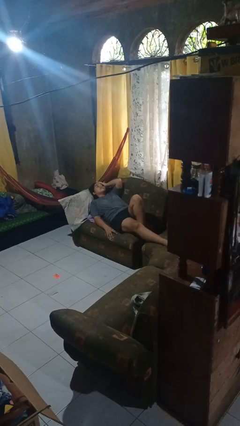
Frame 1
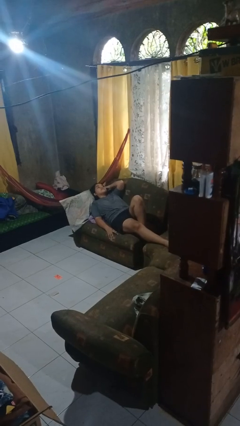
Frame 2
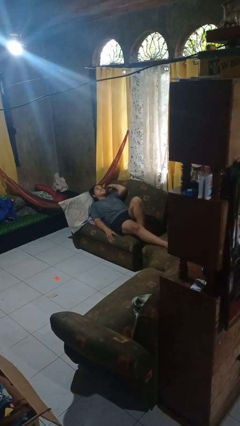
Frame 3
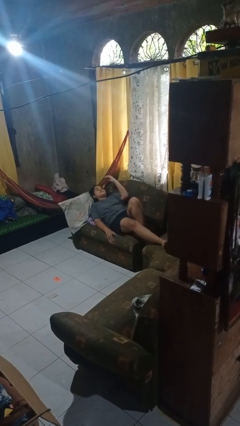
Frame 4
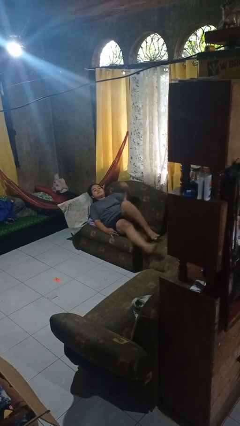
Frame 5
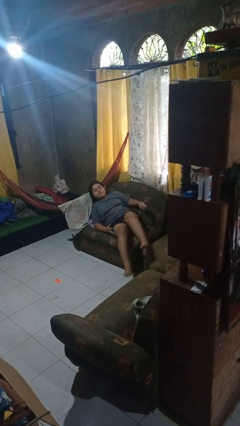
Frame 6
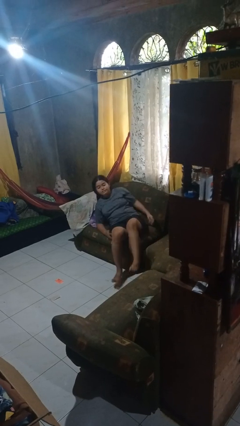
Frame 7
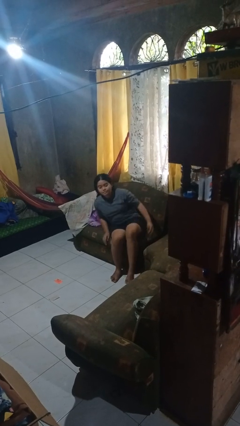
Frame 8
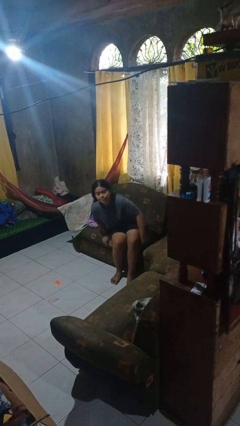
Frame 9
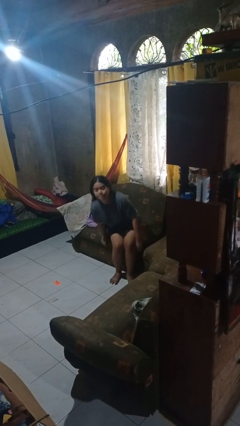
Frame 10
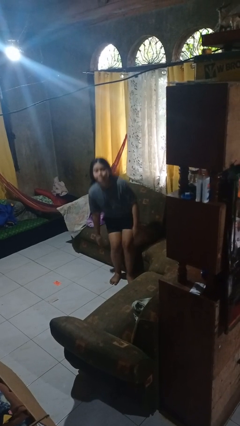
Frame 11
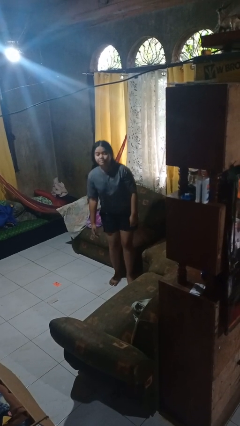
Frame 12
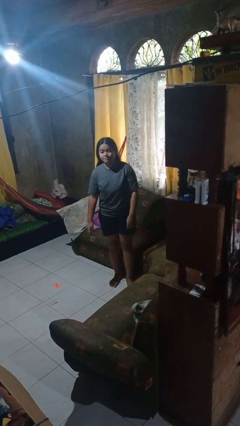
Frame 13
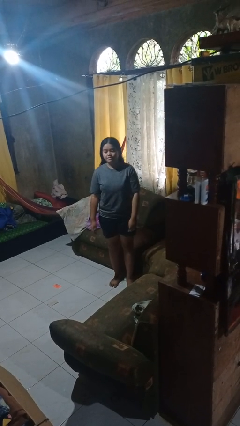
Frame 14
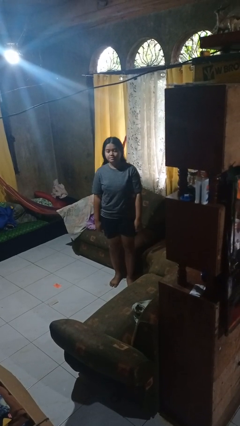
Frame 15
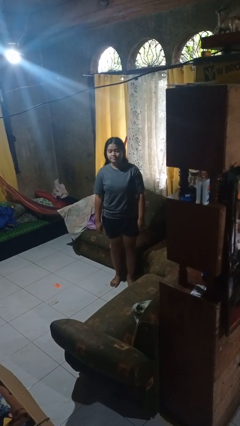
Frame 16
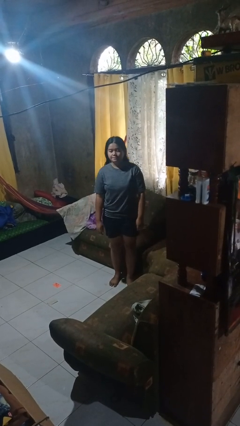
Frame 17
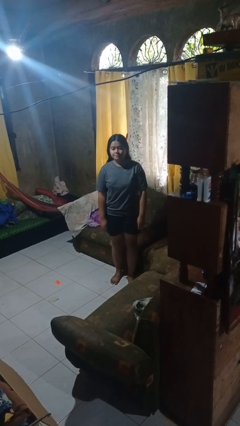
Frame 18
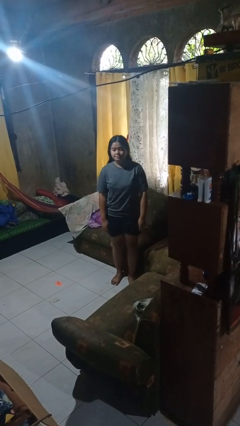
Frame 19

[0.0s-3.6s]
person stands up

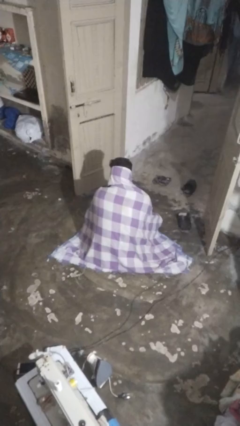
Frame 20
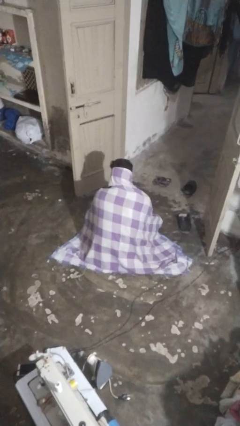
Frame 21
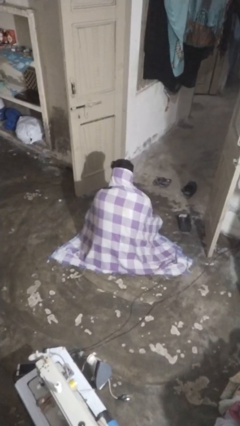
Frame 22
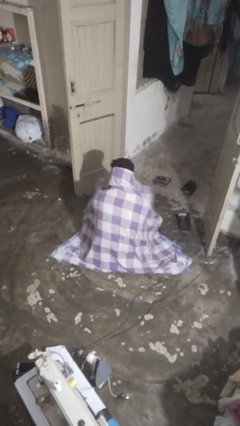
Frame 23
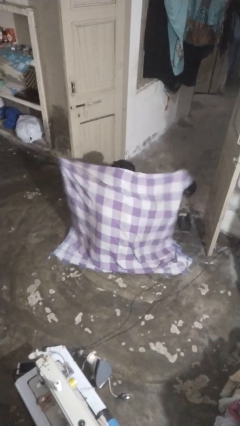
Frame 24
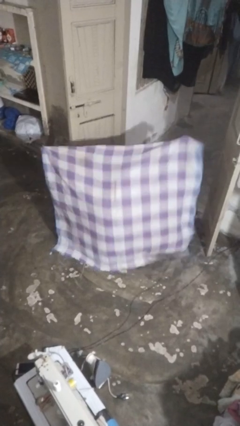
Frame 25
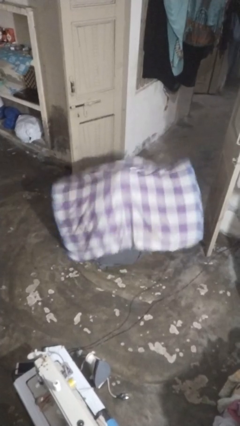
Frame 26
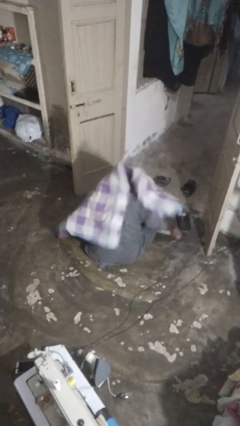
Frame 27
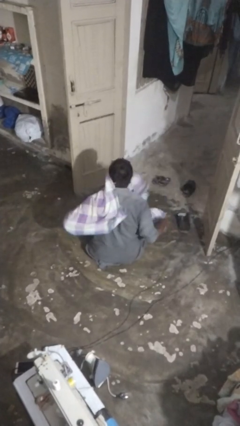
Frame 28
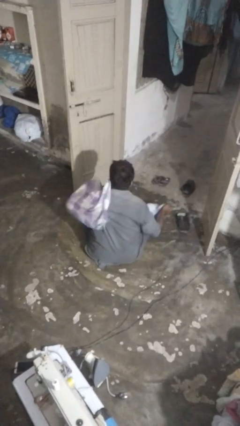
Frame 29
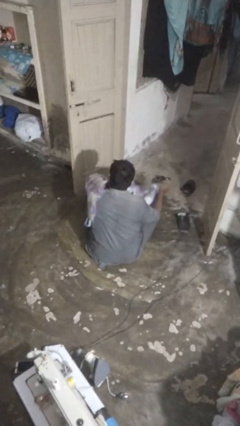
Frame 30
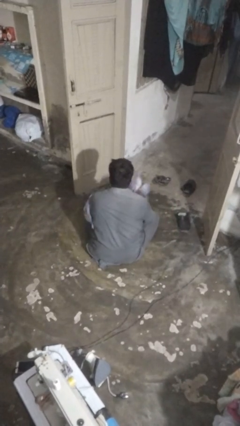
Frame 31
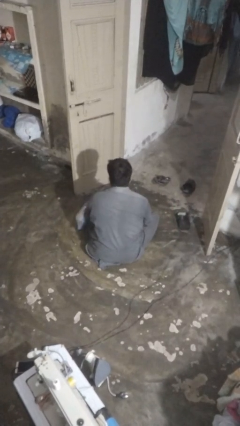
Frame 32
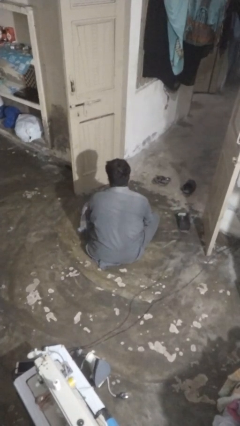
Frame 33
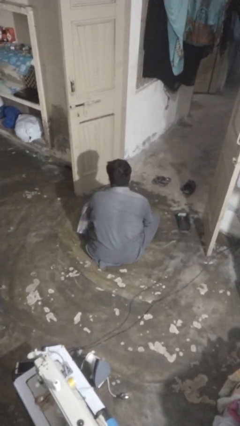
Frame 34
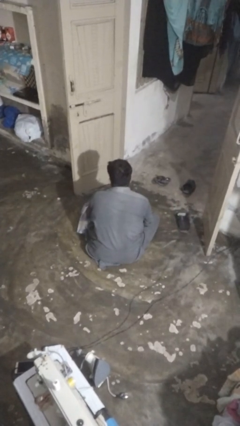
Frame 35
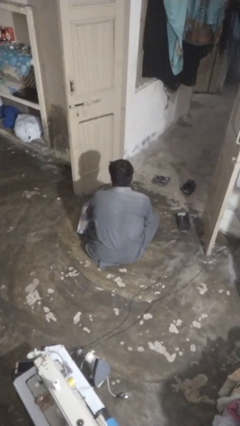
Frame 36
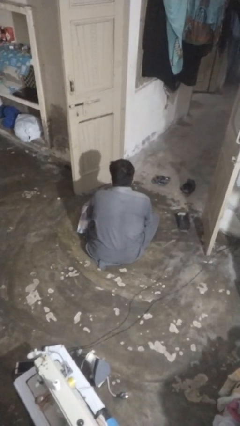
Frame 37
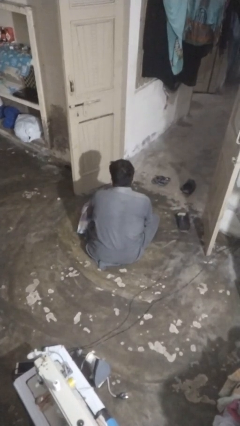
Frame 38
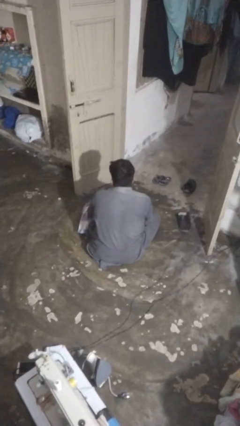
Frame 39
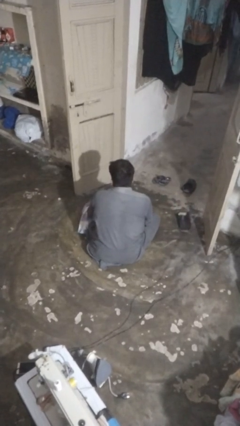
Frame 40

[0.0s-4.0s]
person uncovers with blanket

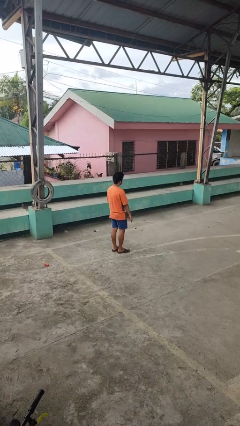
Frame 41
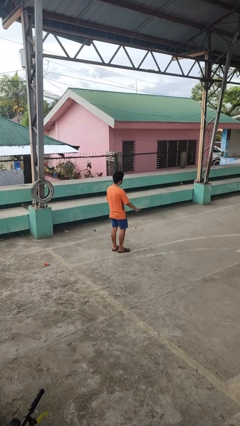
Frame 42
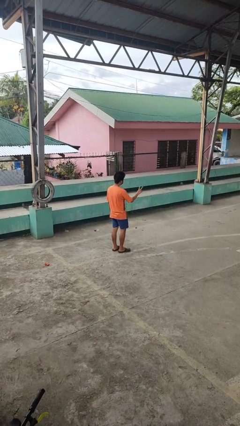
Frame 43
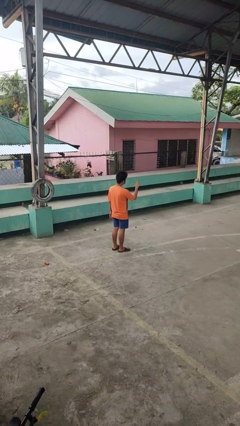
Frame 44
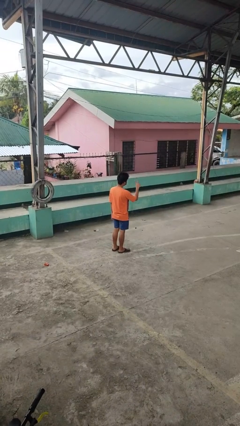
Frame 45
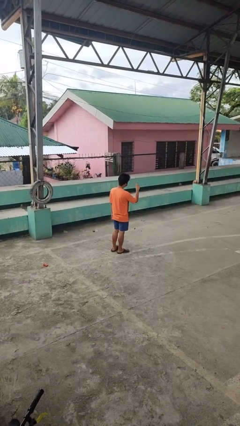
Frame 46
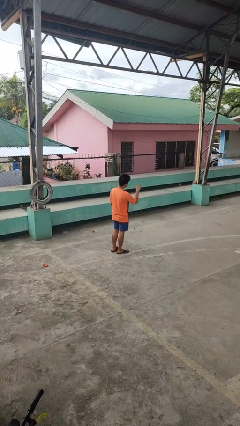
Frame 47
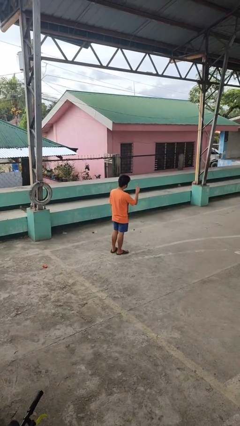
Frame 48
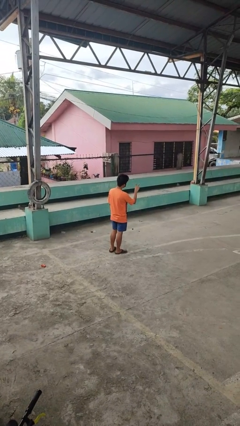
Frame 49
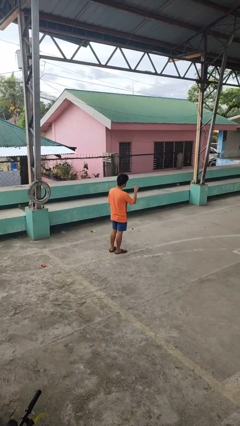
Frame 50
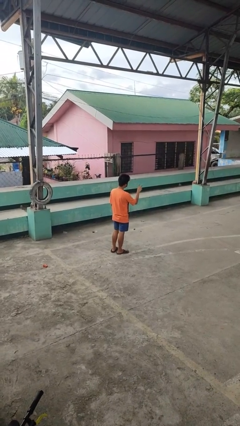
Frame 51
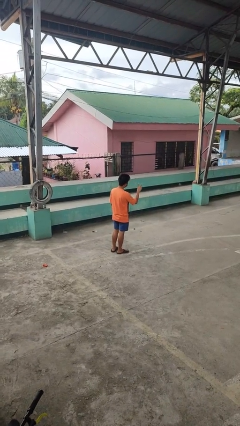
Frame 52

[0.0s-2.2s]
person gestures peace

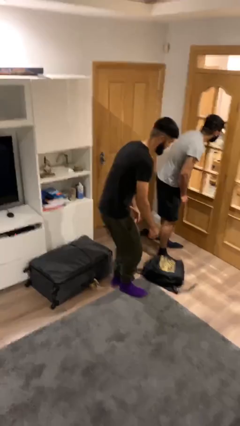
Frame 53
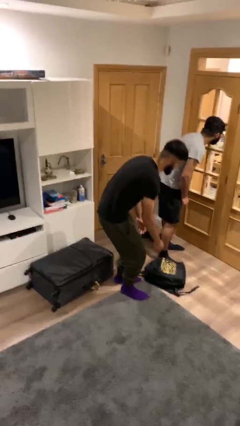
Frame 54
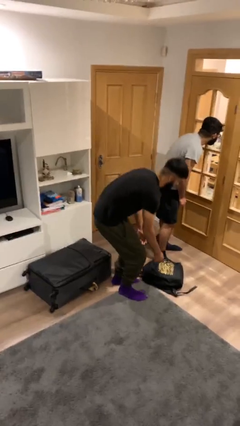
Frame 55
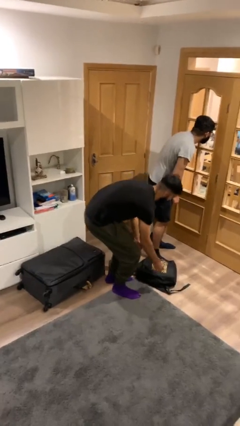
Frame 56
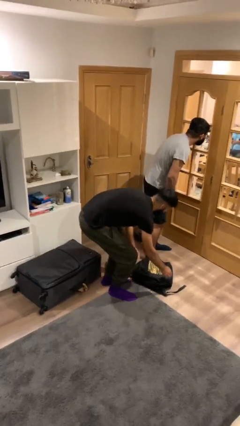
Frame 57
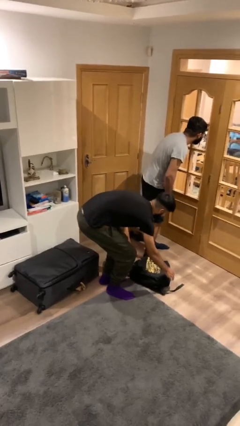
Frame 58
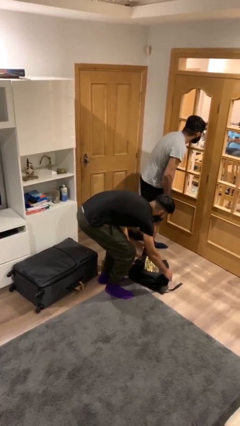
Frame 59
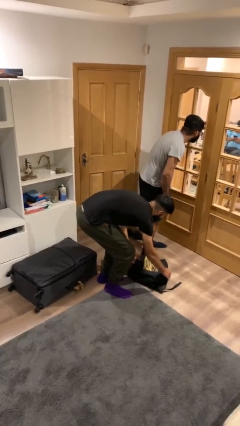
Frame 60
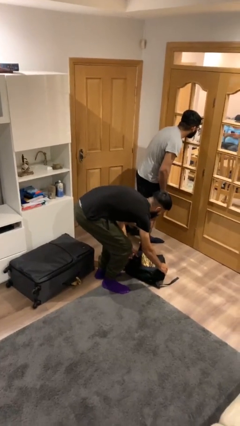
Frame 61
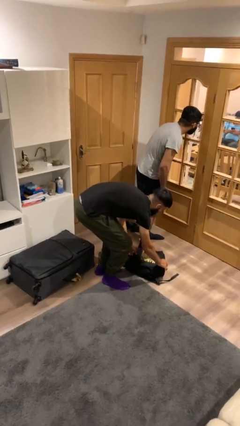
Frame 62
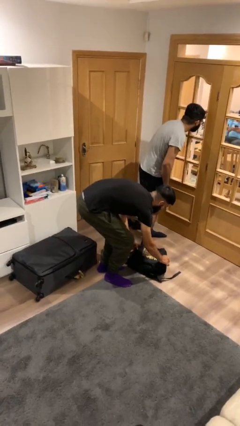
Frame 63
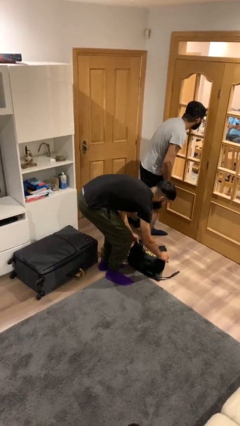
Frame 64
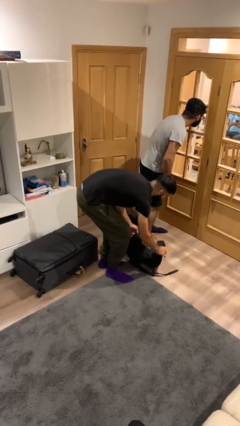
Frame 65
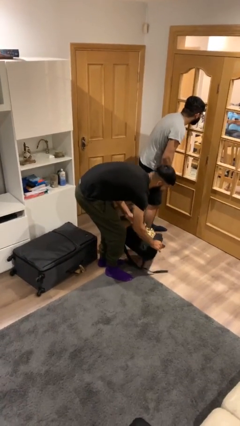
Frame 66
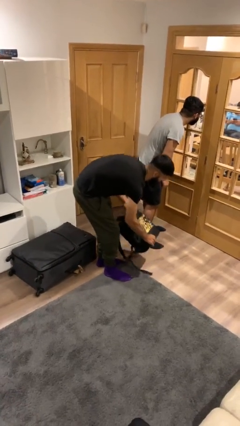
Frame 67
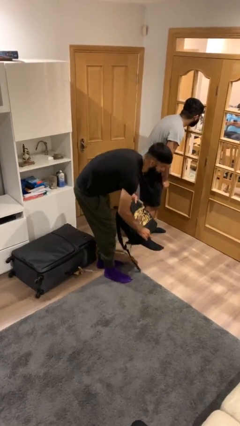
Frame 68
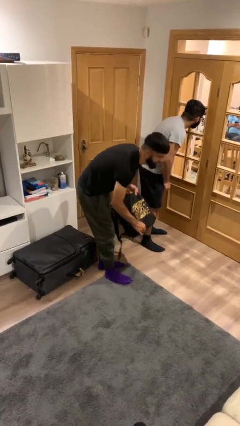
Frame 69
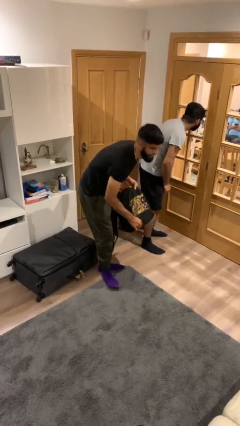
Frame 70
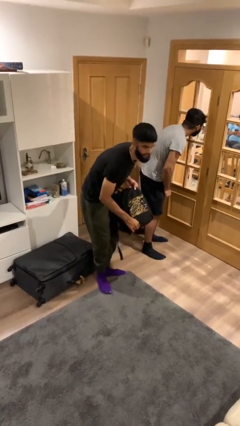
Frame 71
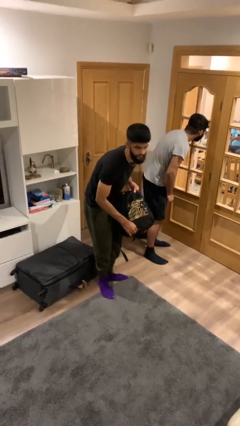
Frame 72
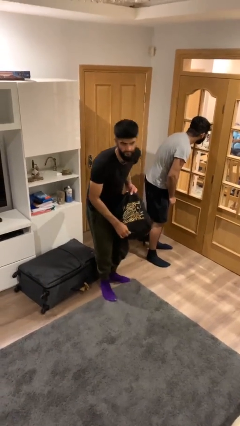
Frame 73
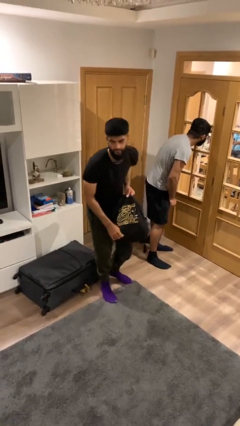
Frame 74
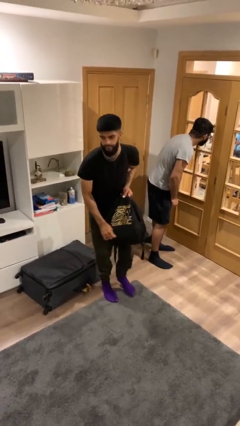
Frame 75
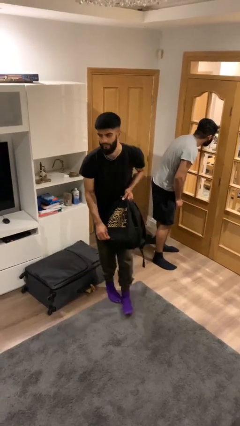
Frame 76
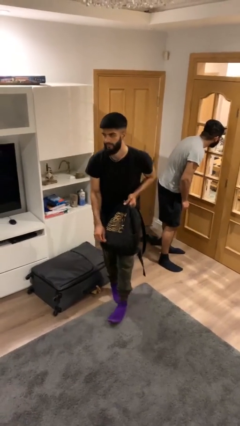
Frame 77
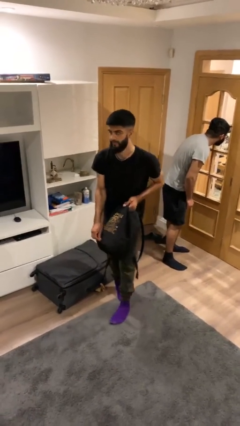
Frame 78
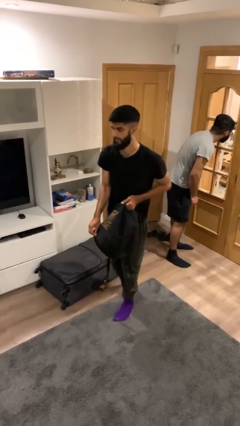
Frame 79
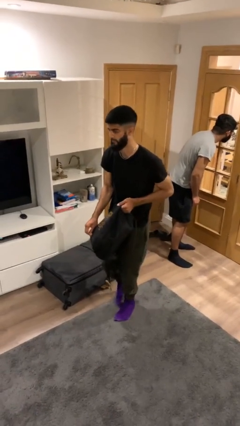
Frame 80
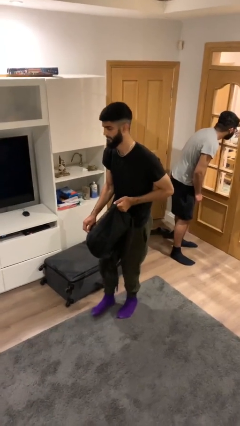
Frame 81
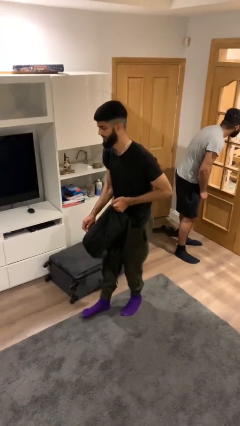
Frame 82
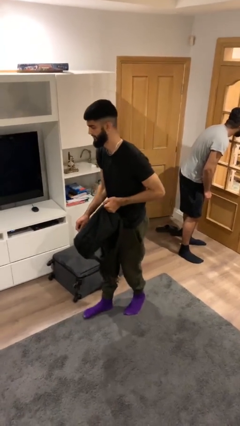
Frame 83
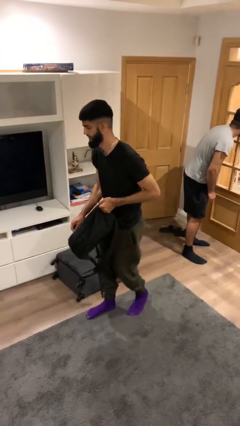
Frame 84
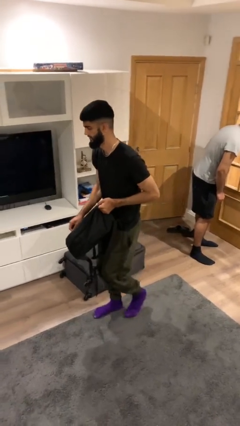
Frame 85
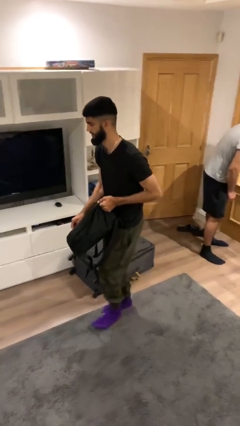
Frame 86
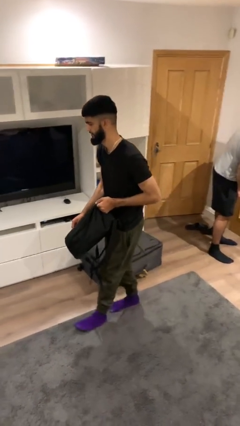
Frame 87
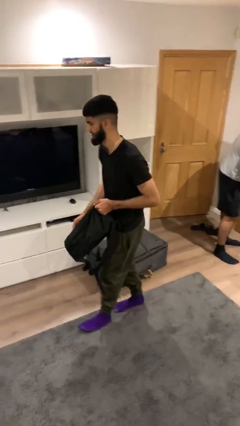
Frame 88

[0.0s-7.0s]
person steals object from person

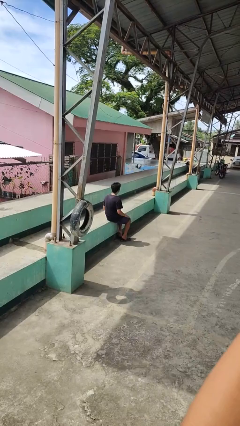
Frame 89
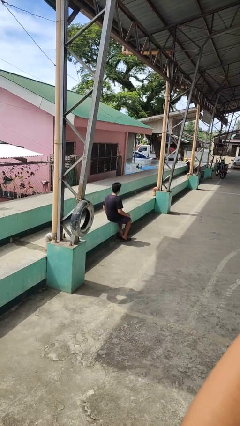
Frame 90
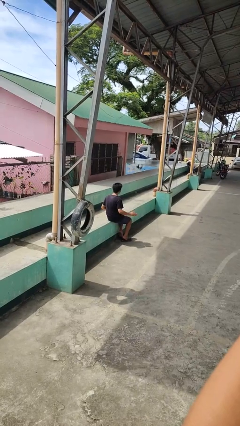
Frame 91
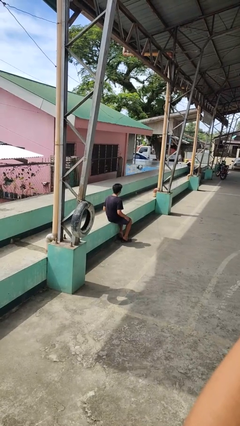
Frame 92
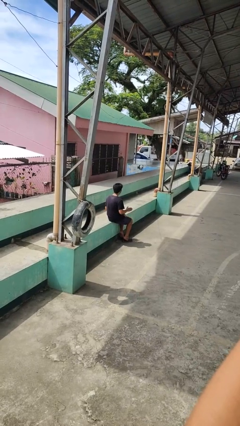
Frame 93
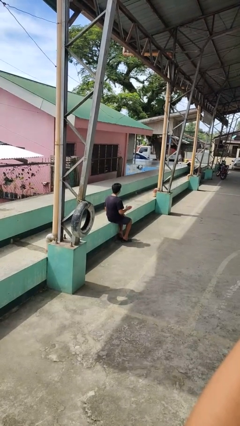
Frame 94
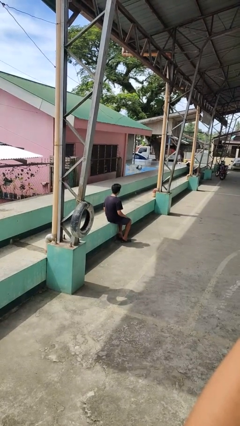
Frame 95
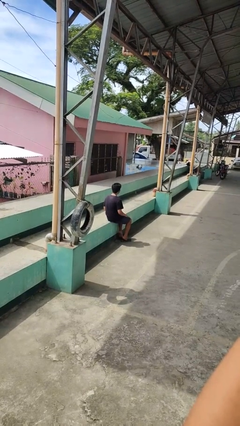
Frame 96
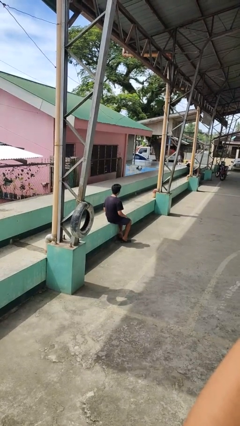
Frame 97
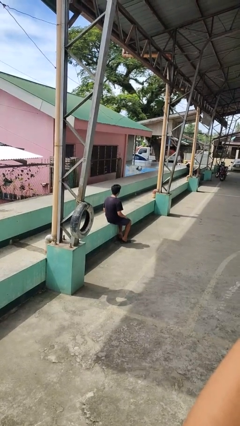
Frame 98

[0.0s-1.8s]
person slaps hands on thighs
